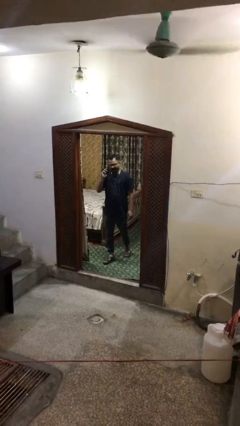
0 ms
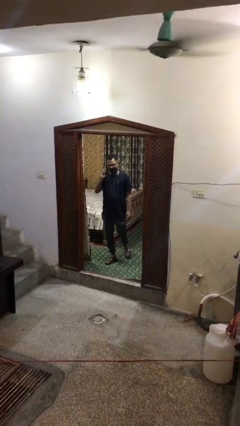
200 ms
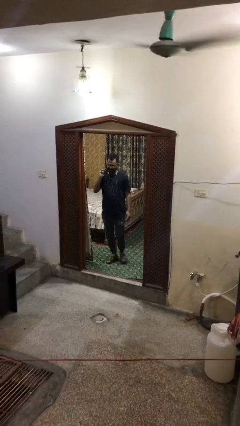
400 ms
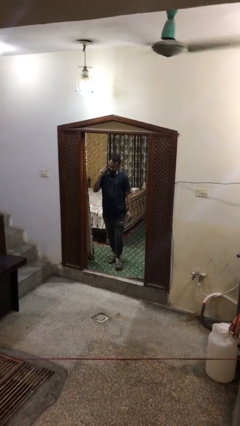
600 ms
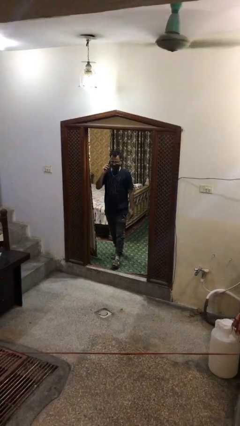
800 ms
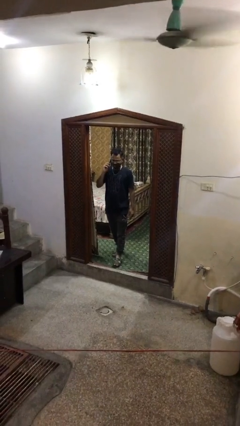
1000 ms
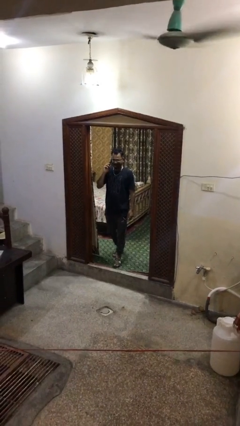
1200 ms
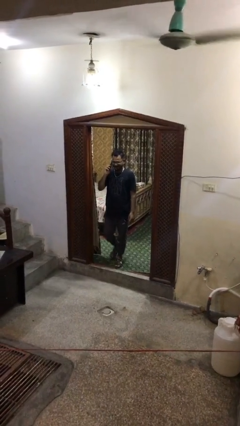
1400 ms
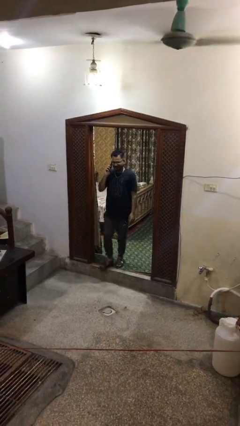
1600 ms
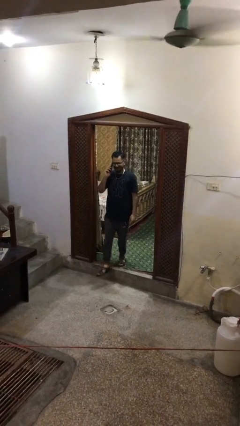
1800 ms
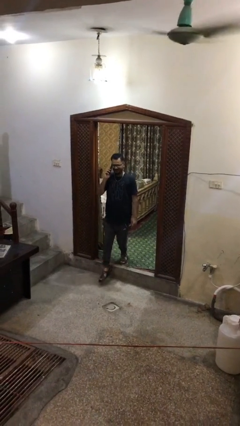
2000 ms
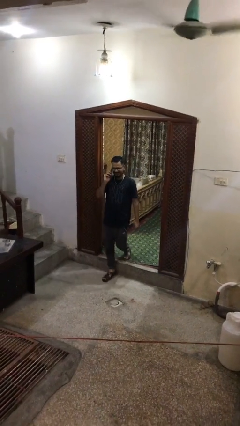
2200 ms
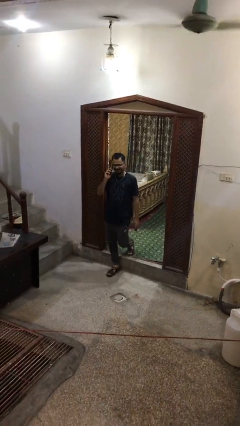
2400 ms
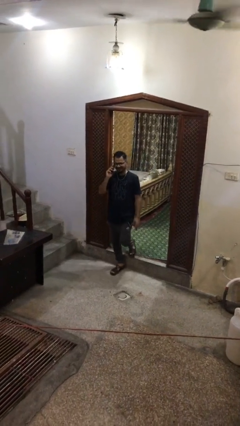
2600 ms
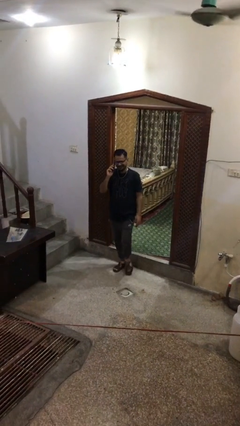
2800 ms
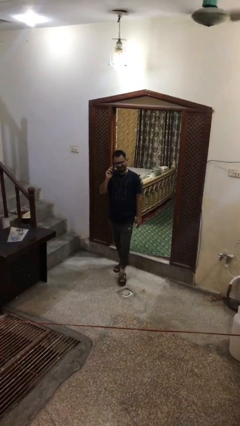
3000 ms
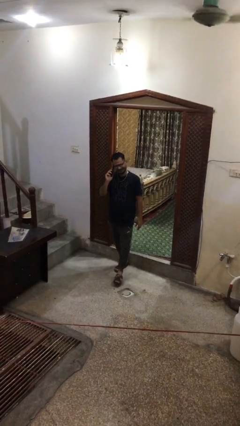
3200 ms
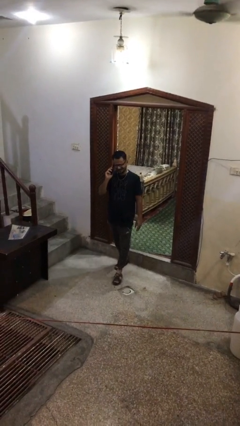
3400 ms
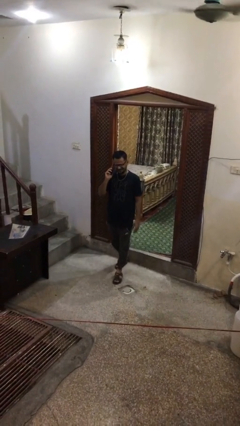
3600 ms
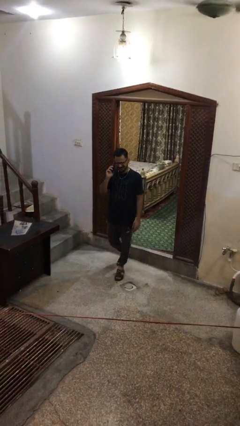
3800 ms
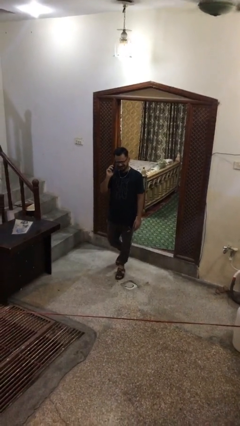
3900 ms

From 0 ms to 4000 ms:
person enters scene through structure

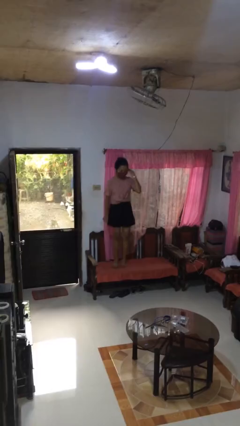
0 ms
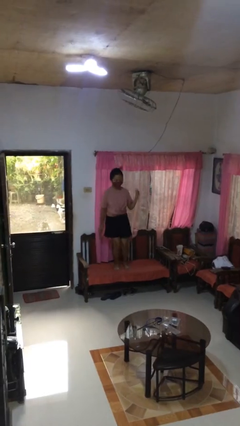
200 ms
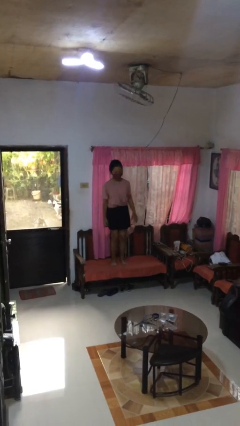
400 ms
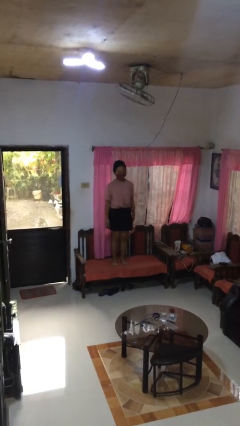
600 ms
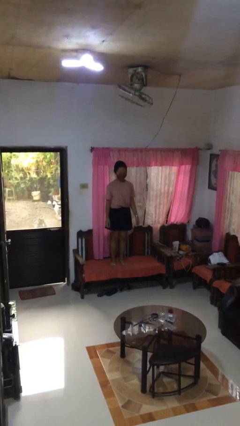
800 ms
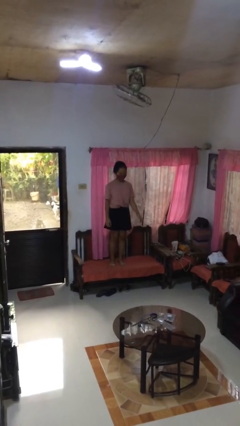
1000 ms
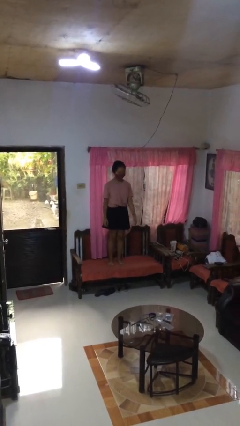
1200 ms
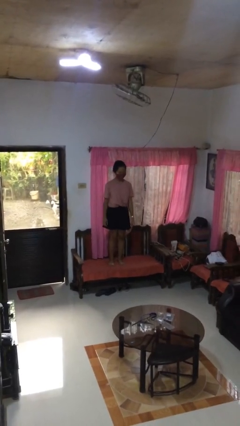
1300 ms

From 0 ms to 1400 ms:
person jumps on couch

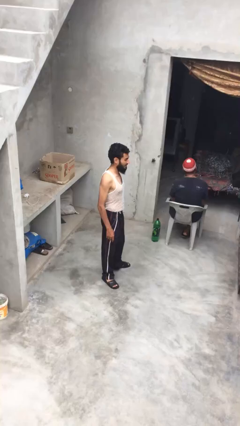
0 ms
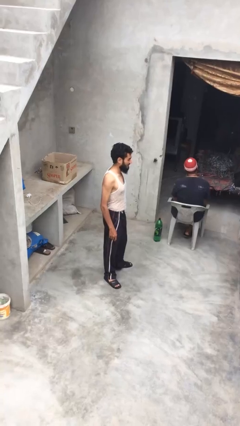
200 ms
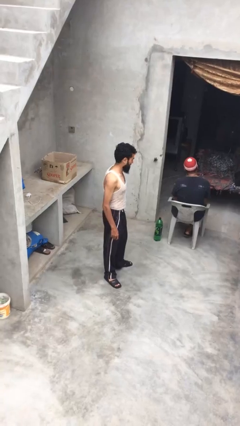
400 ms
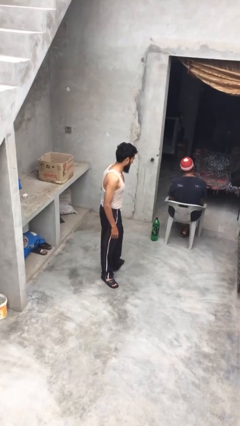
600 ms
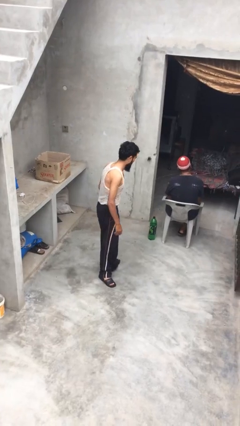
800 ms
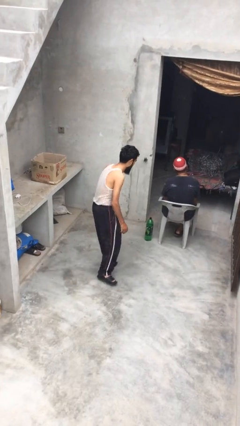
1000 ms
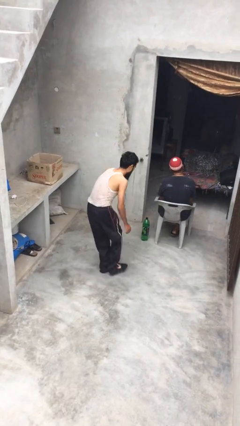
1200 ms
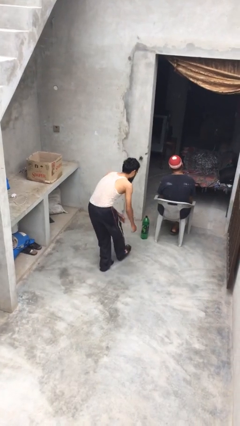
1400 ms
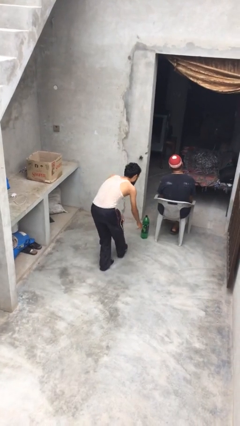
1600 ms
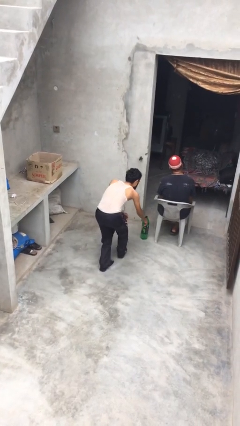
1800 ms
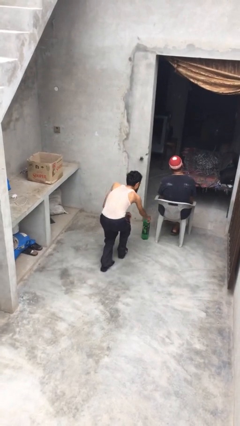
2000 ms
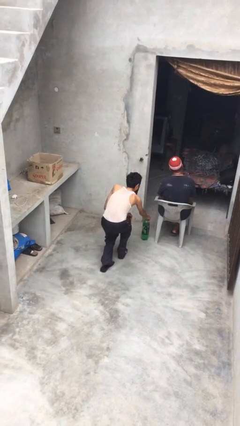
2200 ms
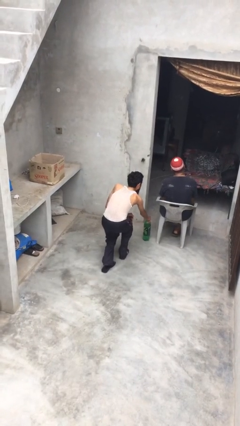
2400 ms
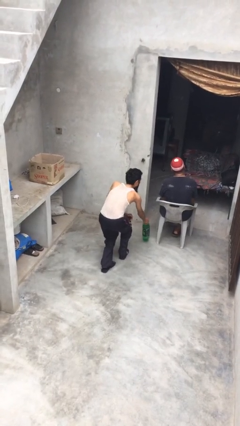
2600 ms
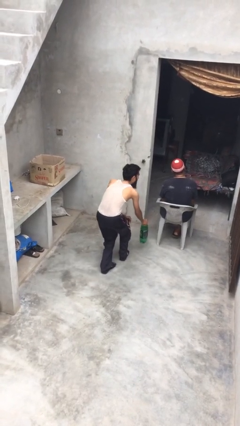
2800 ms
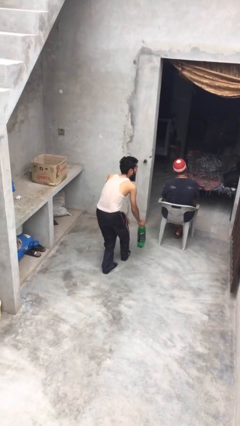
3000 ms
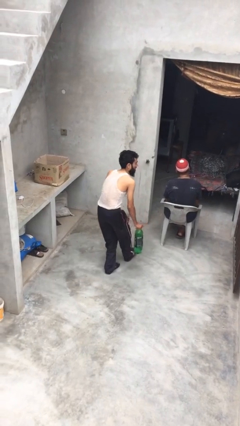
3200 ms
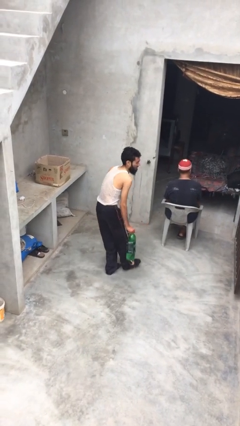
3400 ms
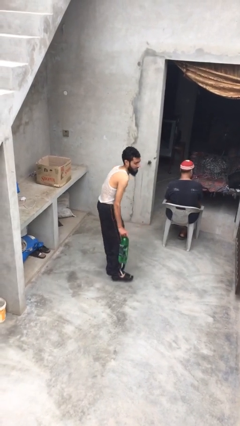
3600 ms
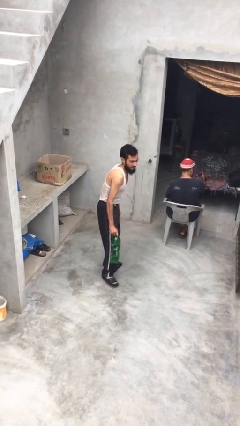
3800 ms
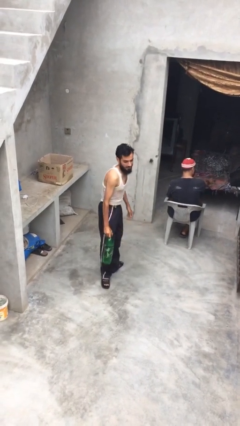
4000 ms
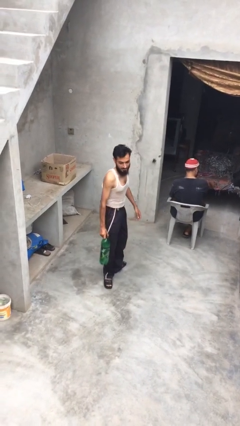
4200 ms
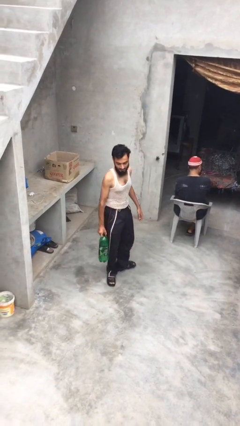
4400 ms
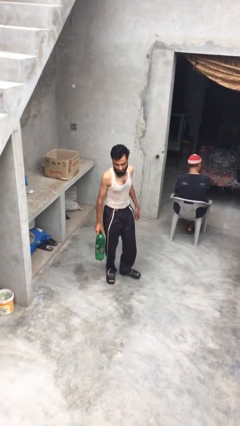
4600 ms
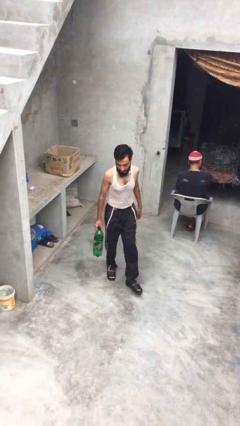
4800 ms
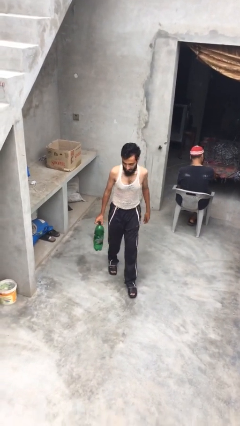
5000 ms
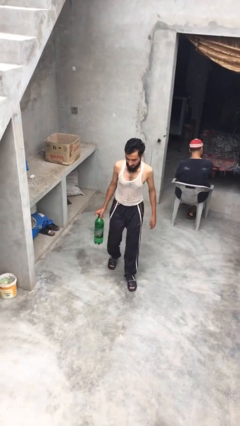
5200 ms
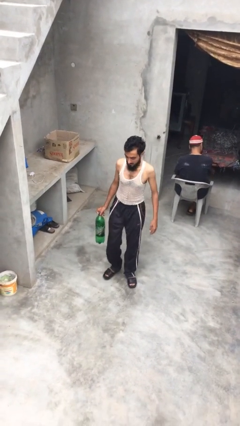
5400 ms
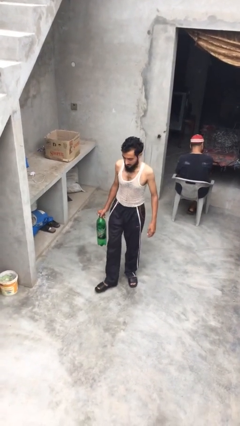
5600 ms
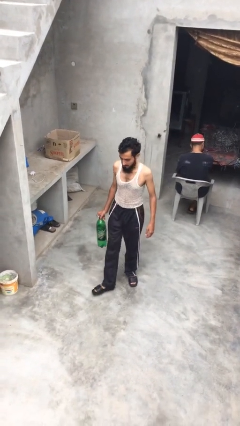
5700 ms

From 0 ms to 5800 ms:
person steals object from person

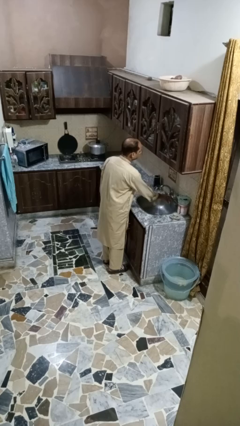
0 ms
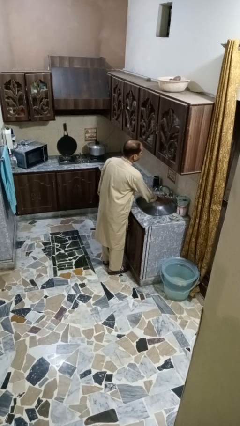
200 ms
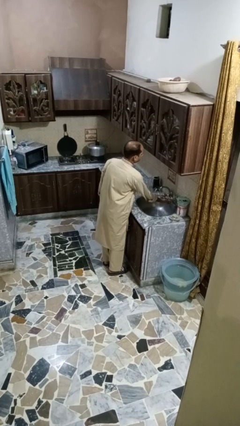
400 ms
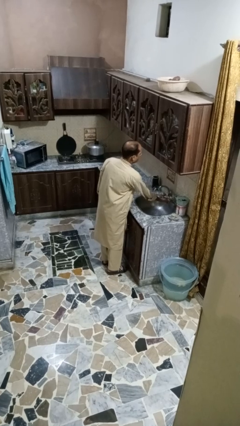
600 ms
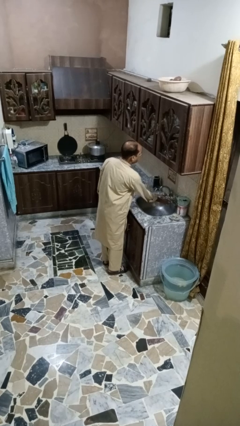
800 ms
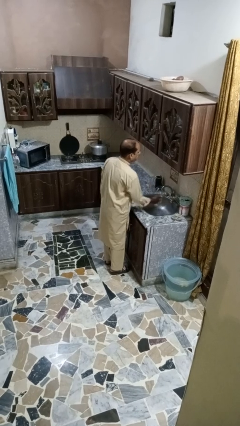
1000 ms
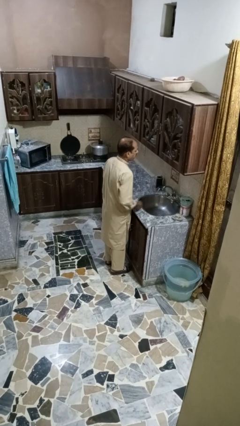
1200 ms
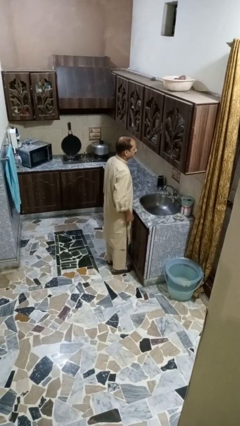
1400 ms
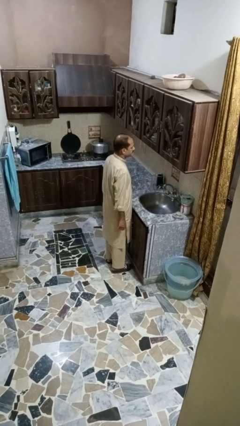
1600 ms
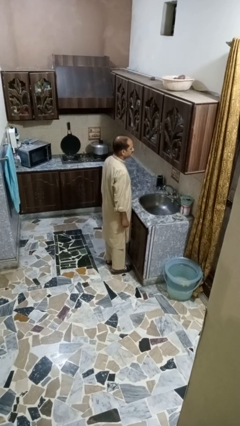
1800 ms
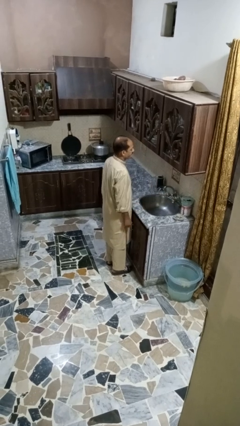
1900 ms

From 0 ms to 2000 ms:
person turns off faucet

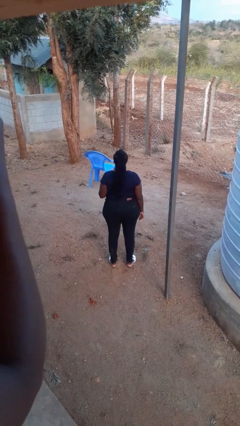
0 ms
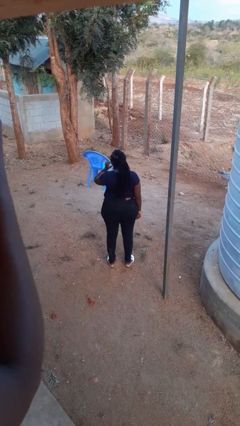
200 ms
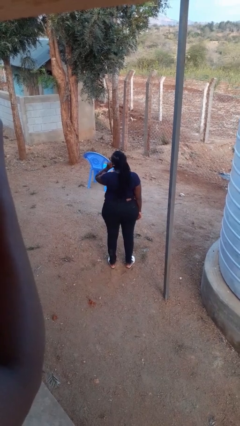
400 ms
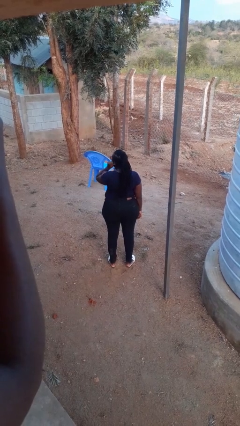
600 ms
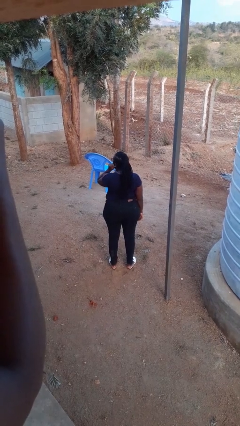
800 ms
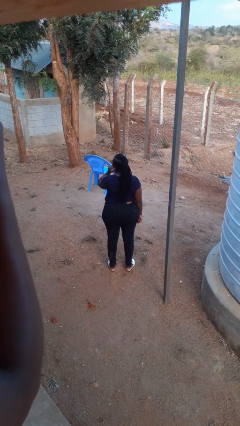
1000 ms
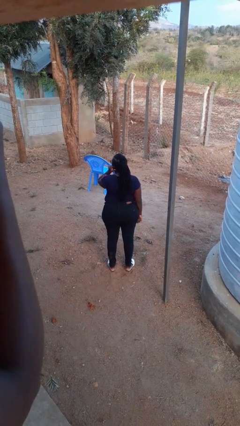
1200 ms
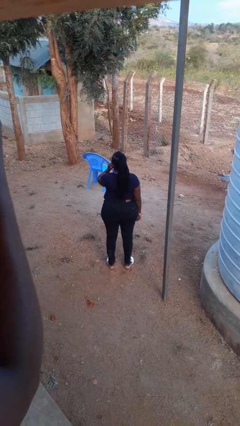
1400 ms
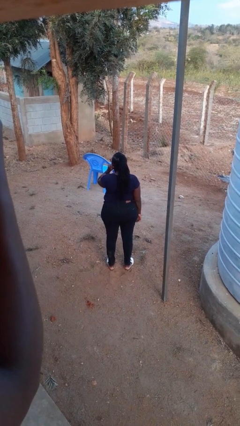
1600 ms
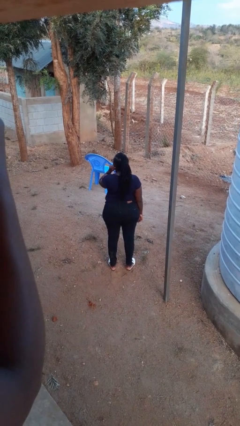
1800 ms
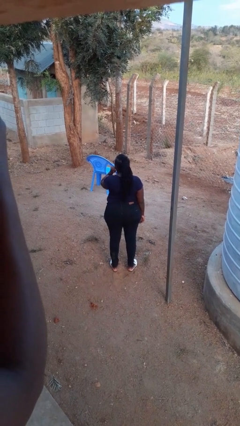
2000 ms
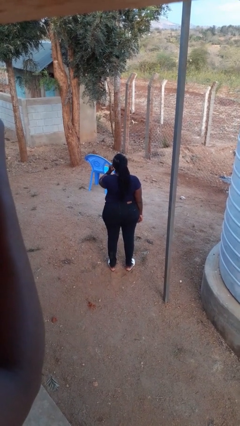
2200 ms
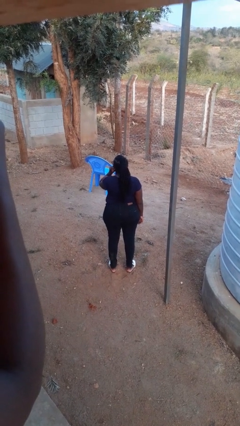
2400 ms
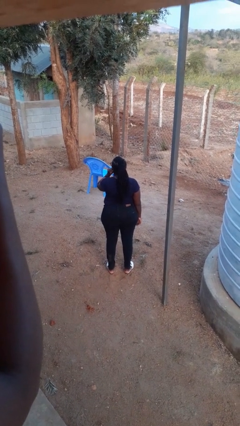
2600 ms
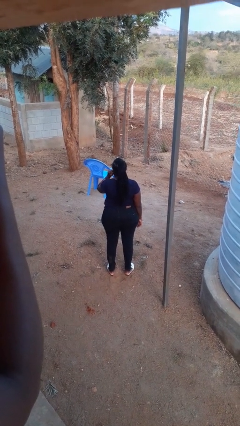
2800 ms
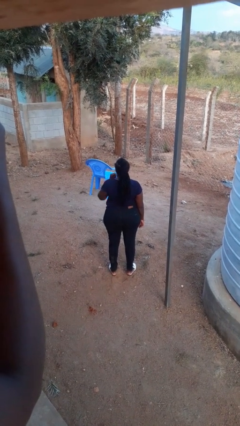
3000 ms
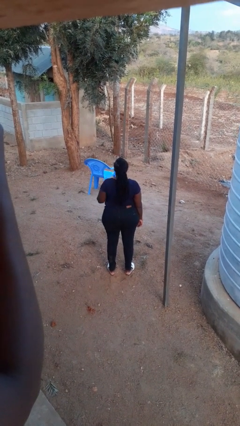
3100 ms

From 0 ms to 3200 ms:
person touches earlobe

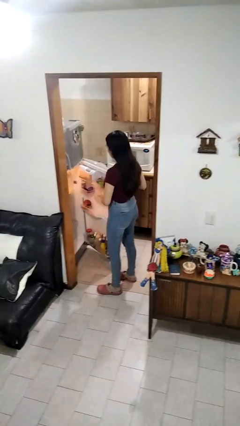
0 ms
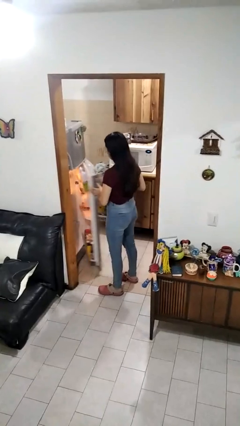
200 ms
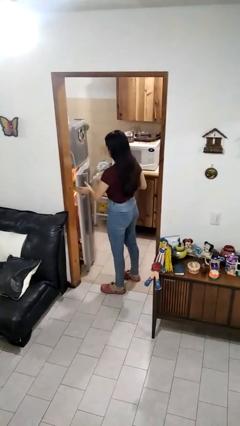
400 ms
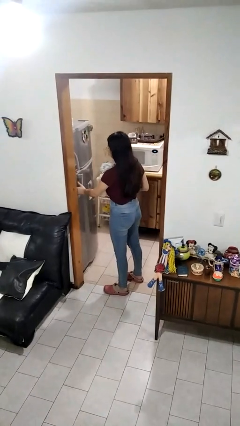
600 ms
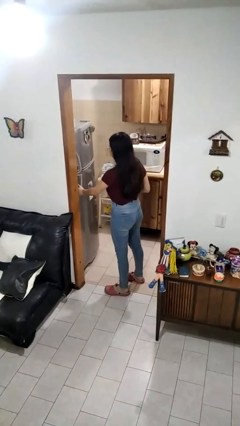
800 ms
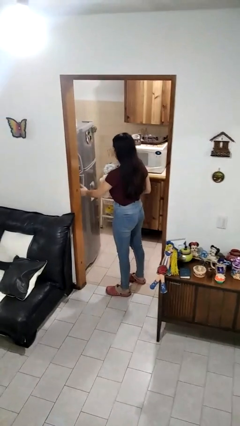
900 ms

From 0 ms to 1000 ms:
person closes refrigerator

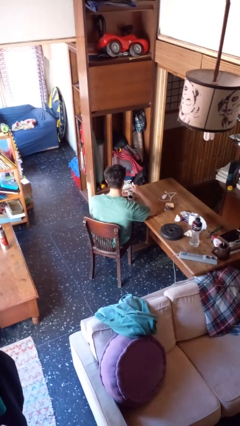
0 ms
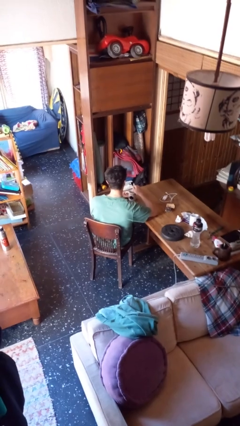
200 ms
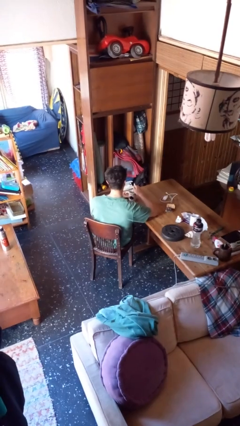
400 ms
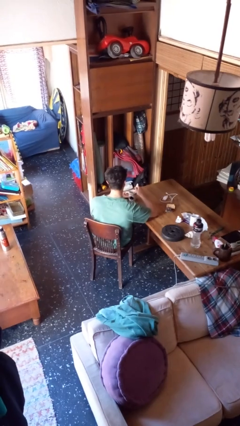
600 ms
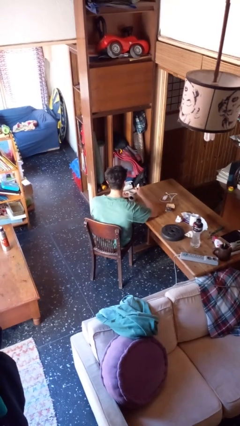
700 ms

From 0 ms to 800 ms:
person stirs mug
